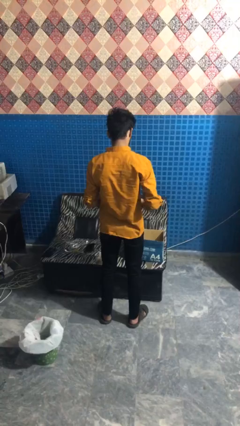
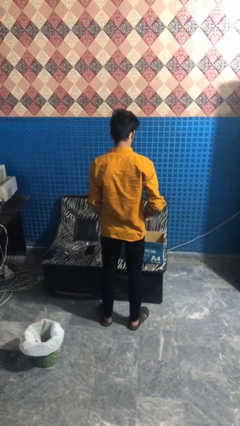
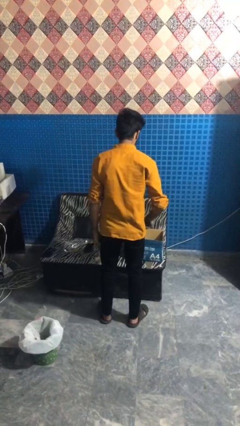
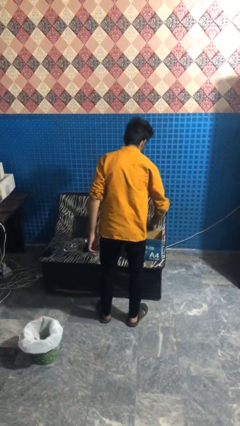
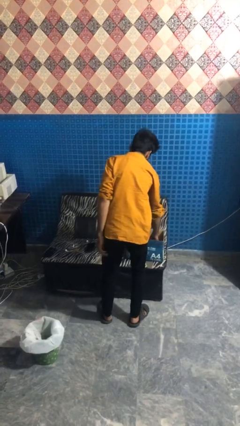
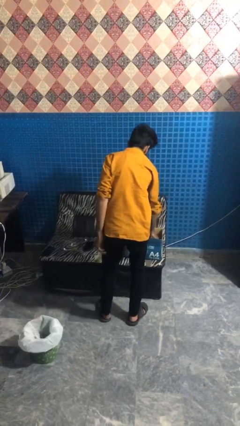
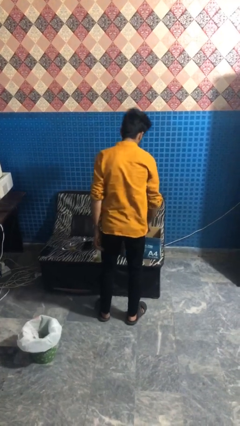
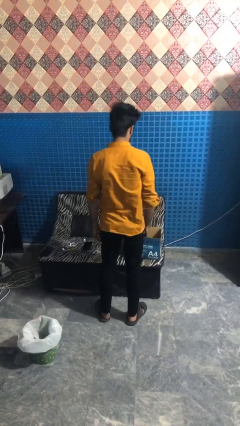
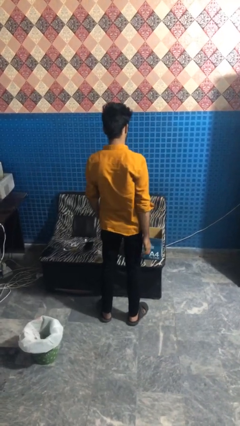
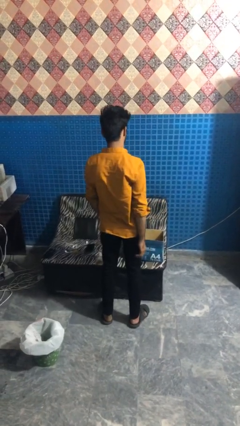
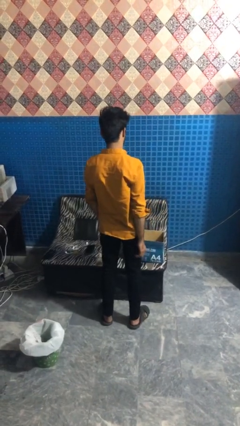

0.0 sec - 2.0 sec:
person puts object into box

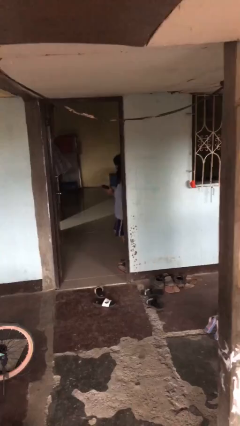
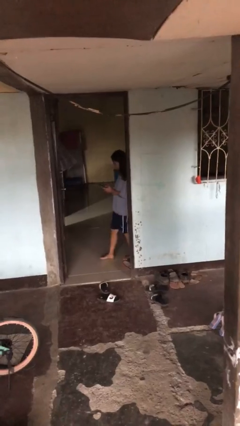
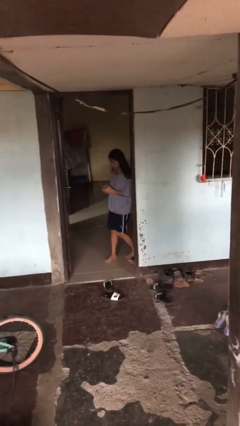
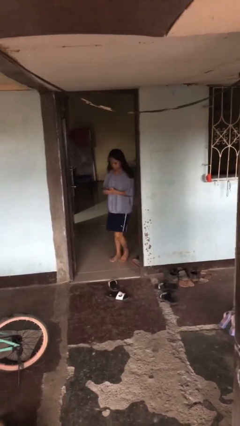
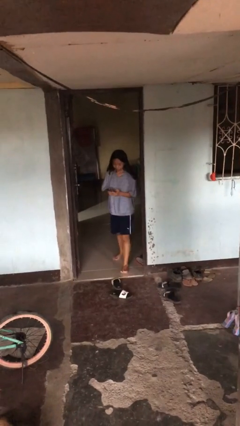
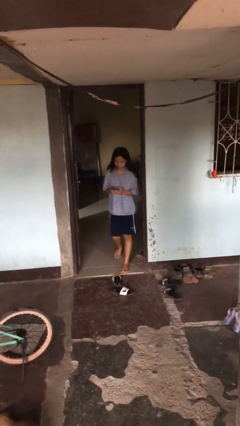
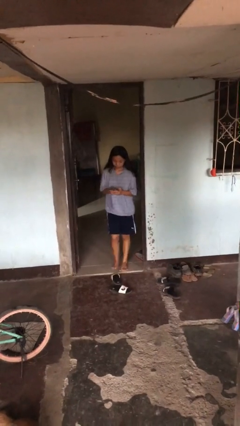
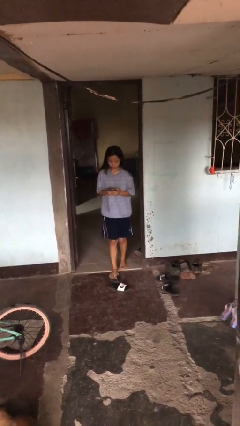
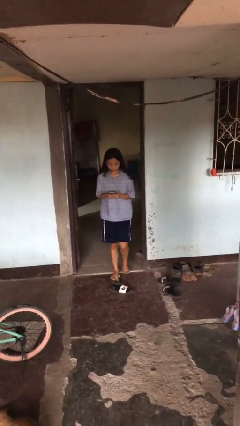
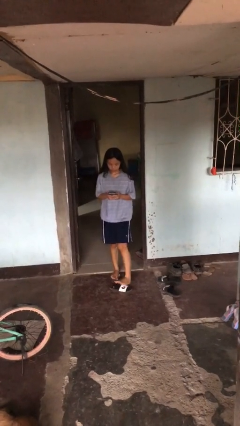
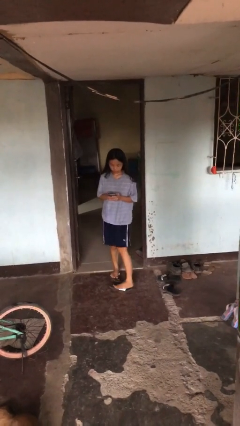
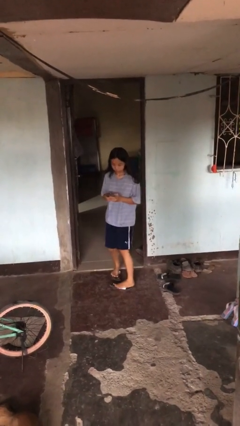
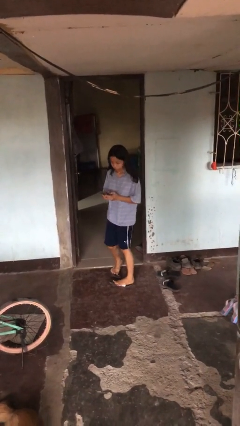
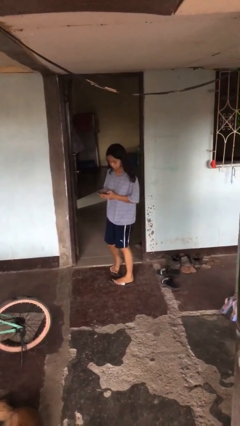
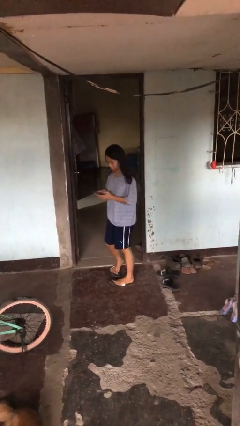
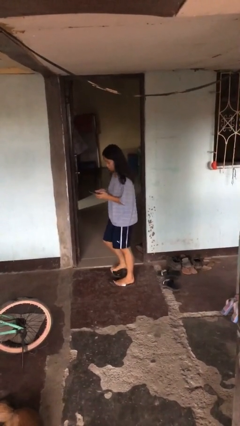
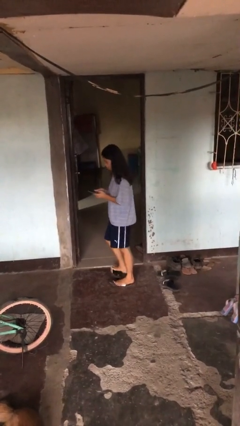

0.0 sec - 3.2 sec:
person enters scene through structure

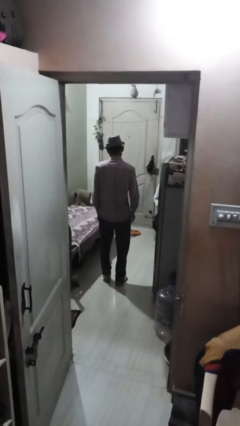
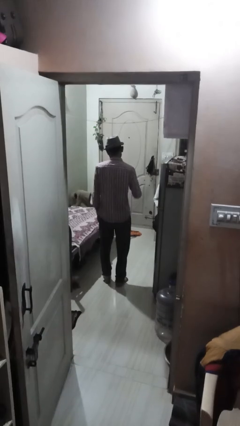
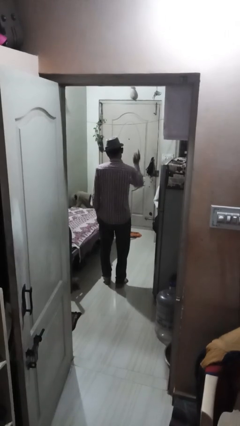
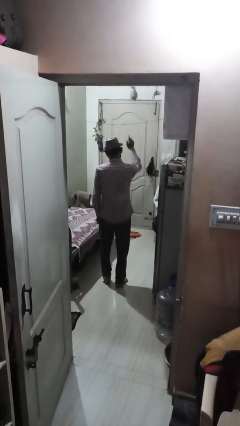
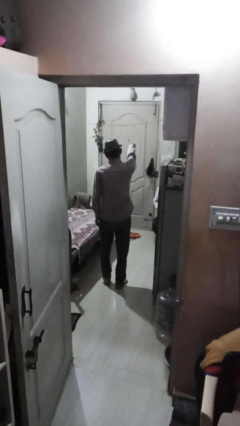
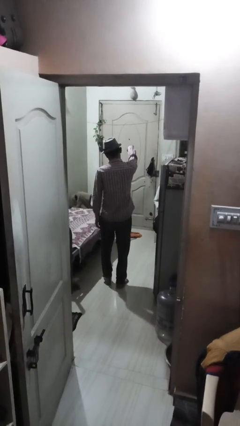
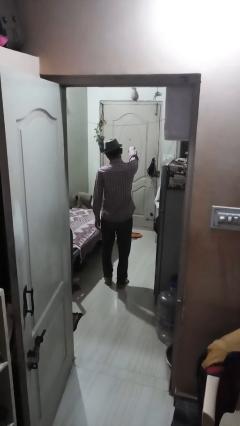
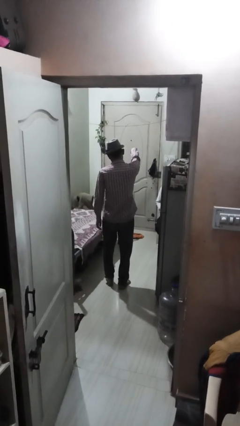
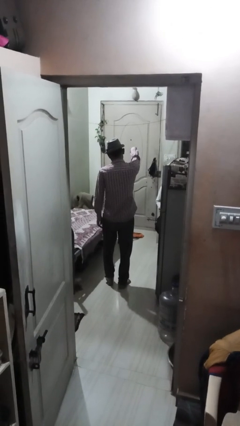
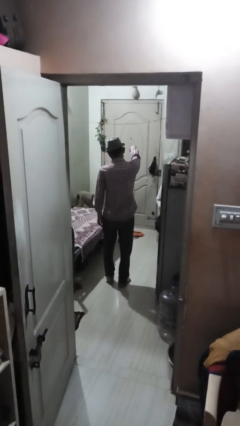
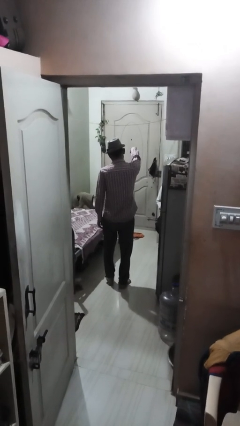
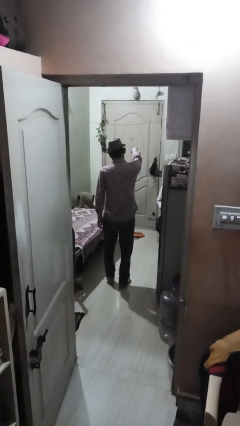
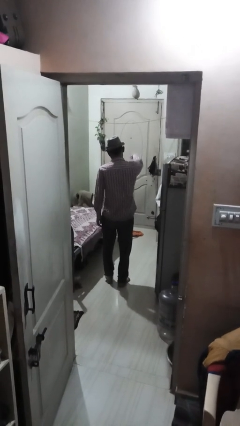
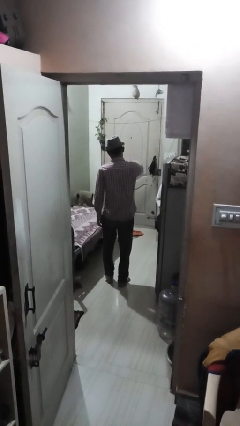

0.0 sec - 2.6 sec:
person points at person

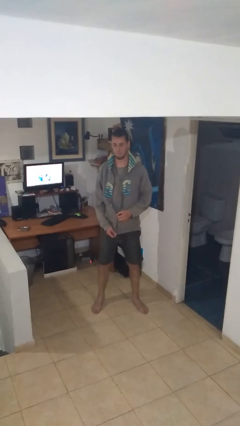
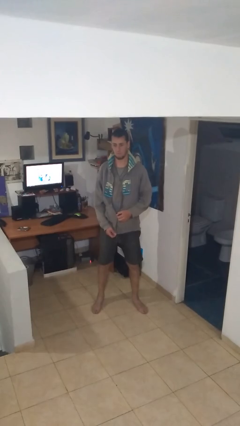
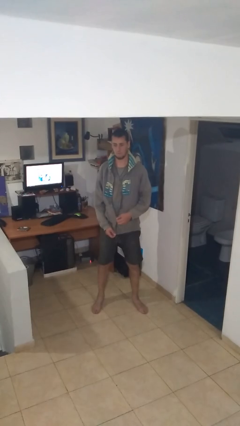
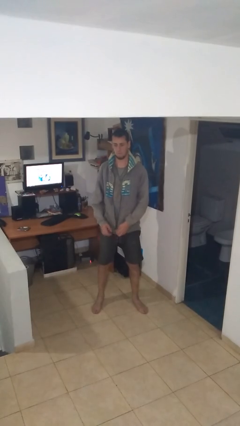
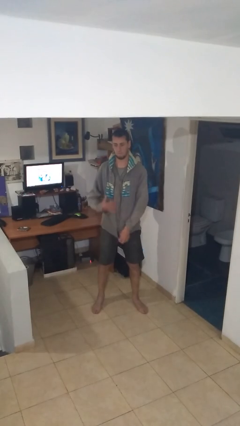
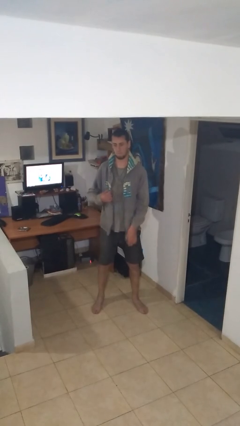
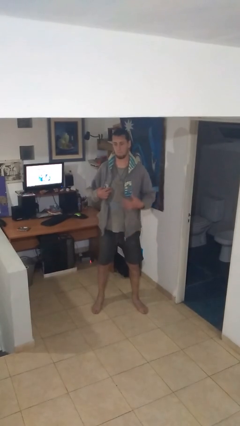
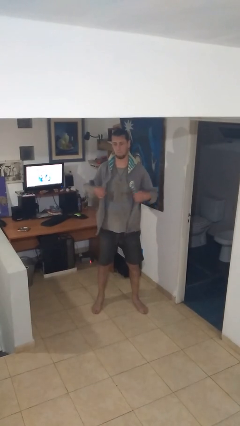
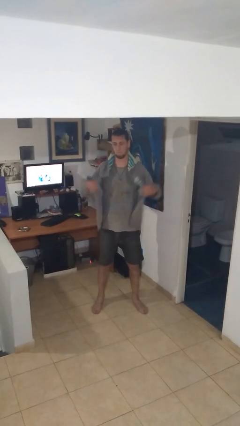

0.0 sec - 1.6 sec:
person unzips jacket

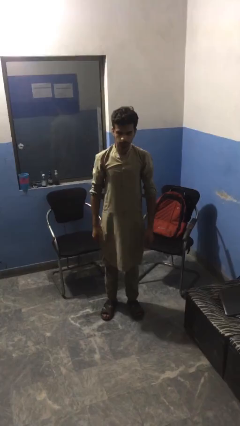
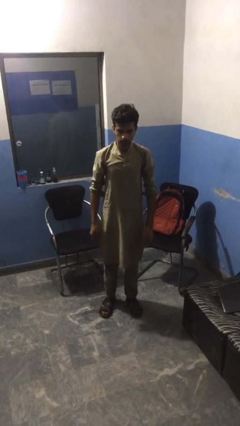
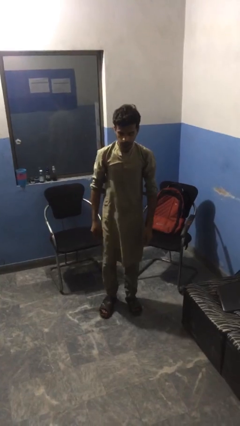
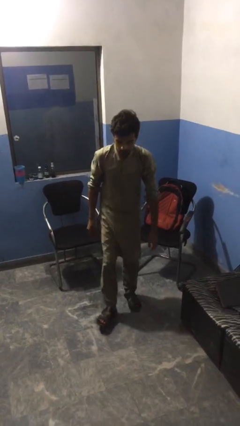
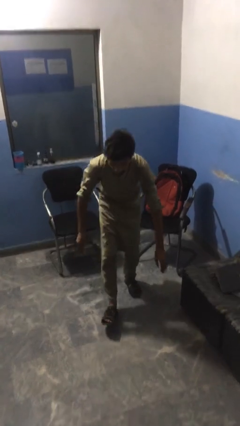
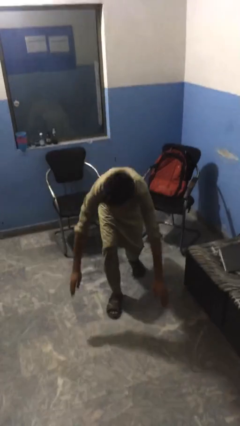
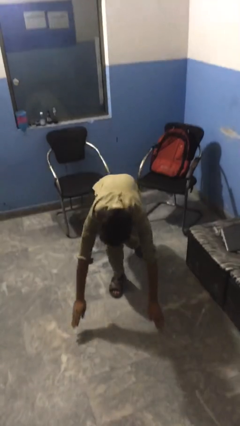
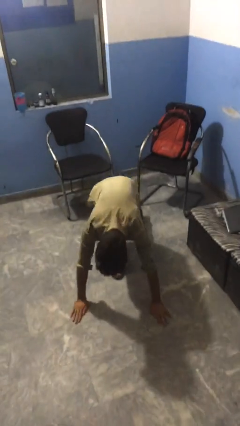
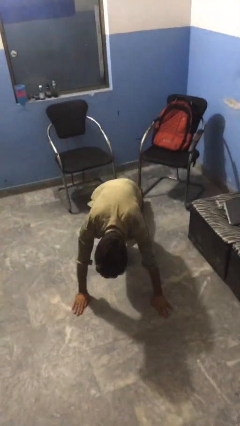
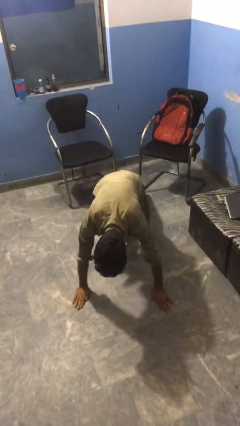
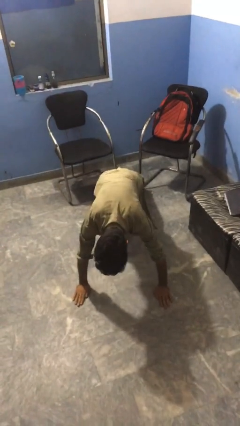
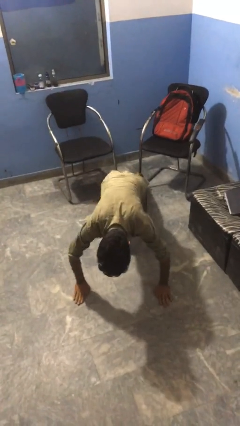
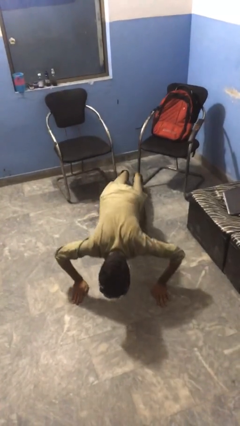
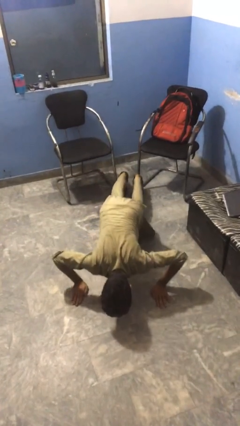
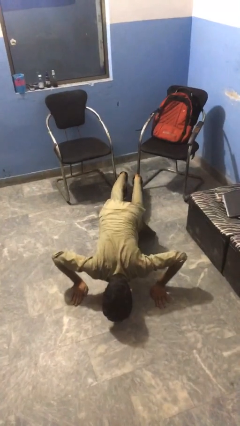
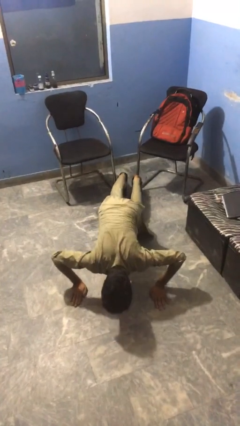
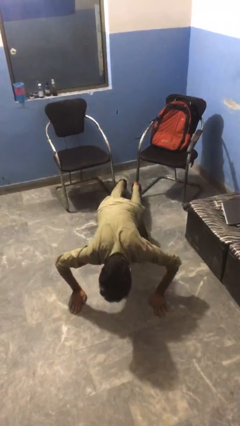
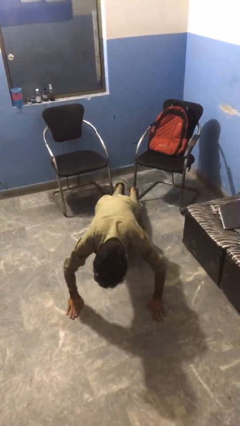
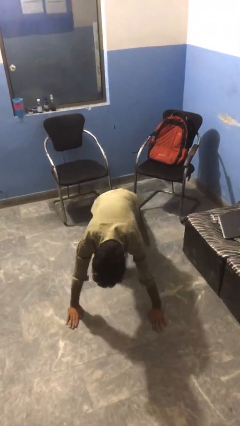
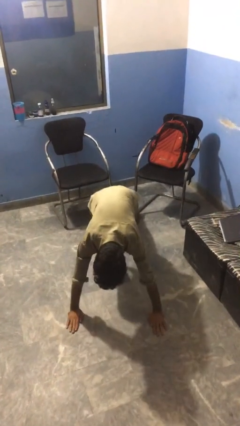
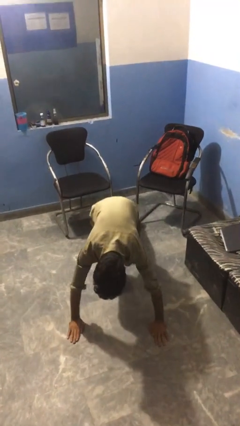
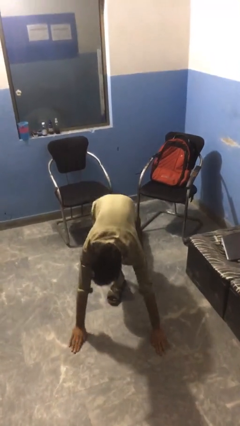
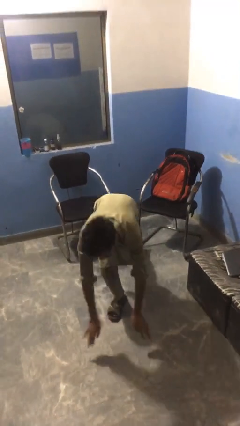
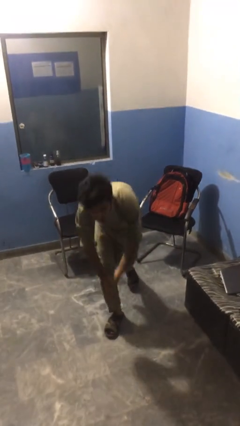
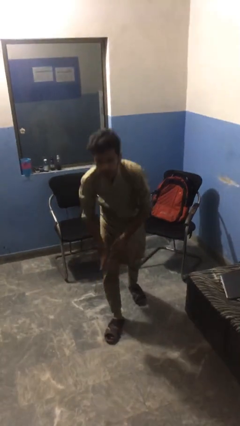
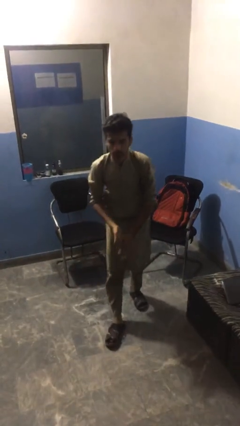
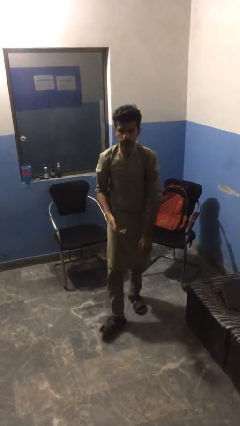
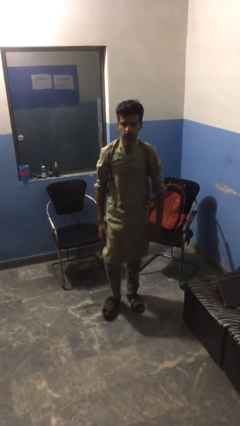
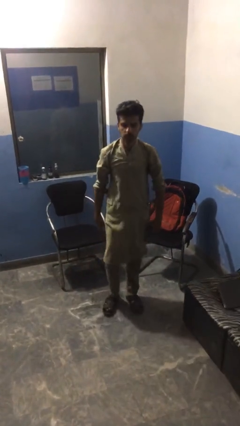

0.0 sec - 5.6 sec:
person exercises with pushup

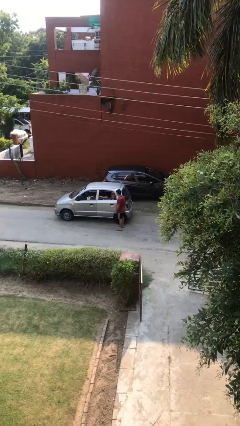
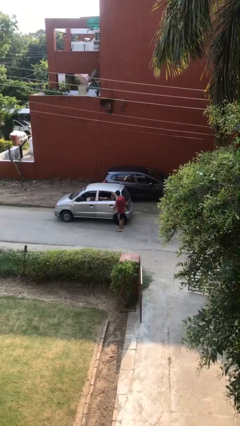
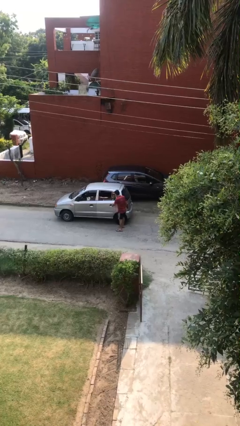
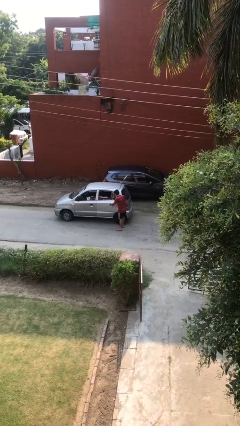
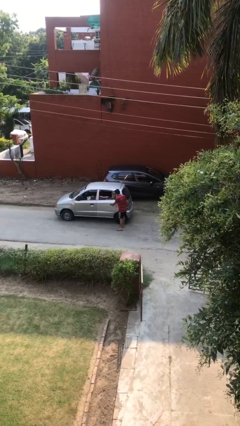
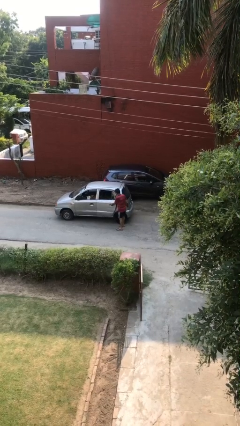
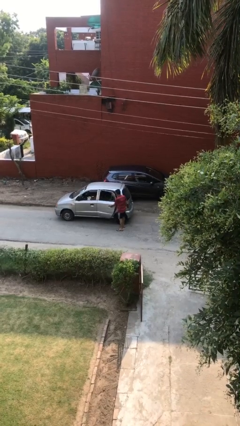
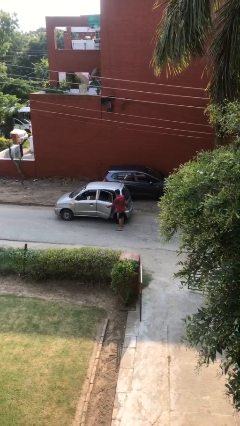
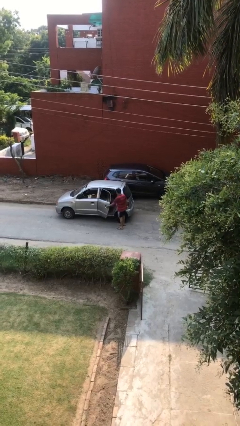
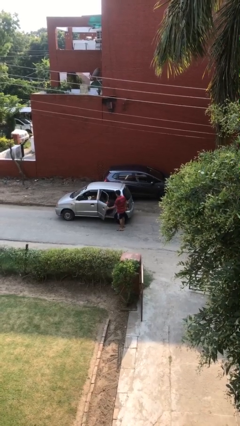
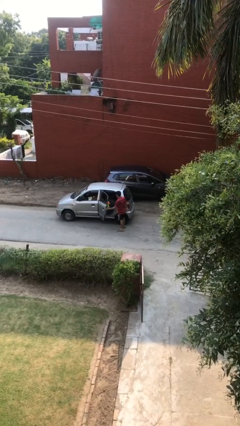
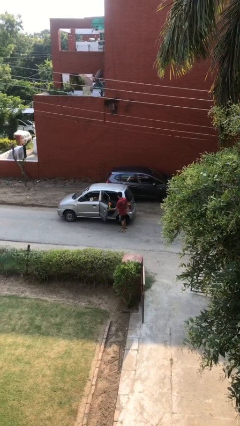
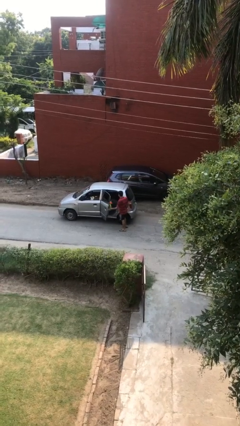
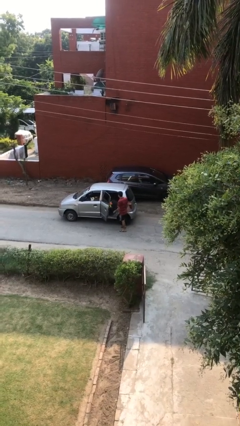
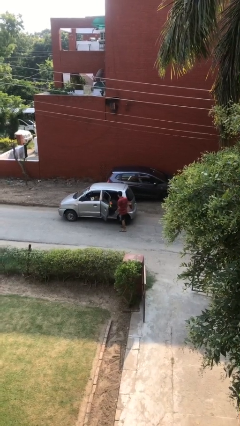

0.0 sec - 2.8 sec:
person opens car door
